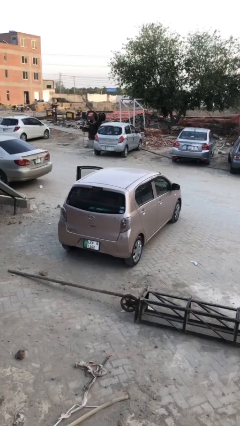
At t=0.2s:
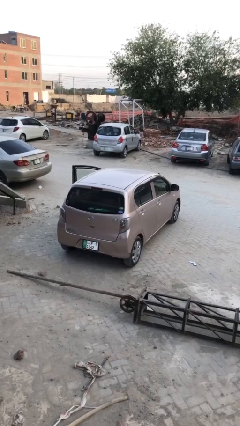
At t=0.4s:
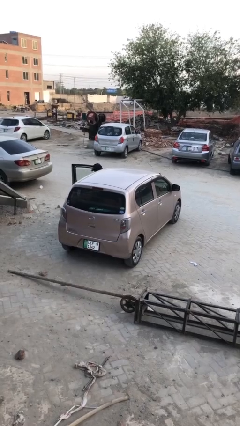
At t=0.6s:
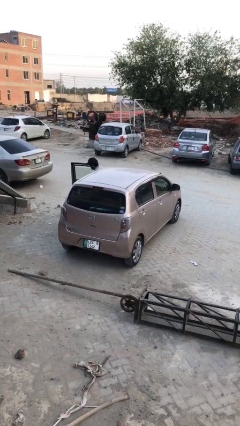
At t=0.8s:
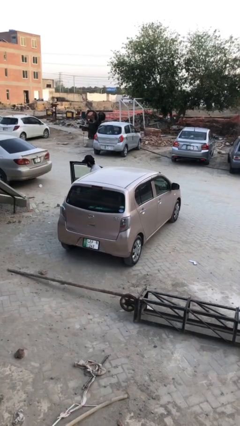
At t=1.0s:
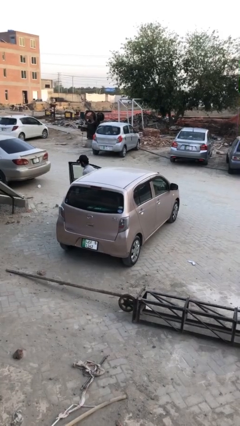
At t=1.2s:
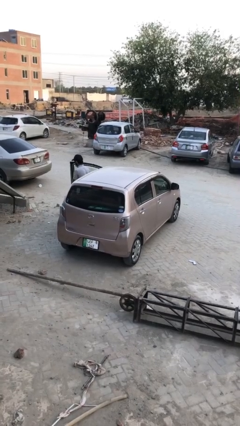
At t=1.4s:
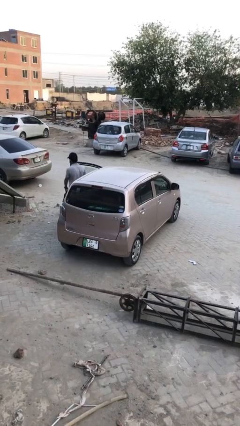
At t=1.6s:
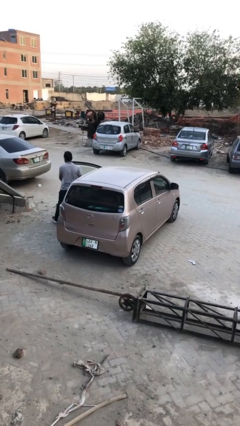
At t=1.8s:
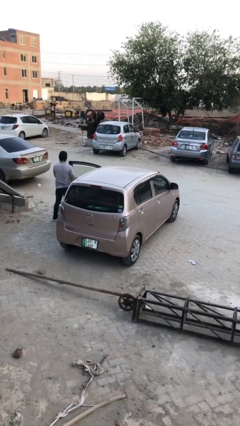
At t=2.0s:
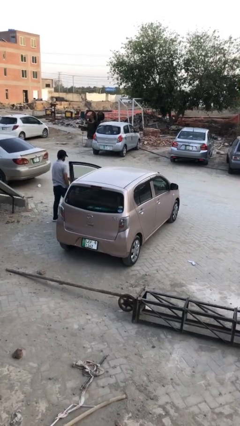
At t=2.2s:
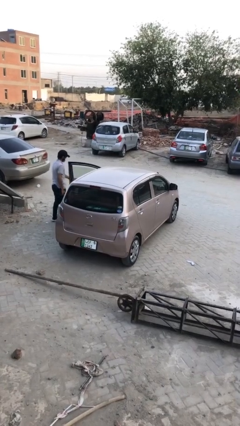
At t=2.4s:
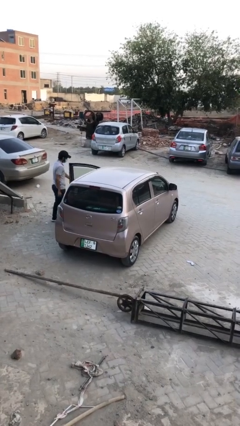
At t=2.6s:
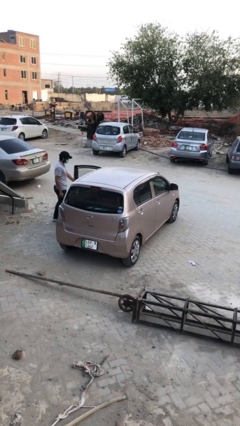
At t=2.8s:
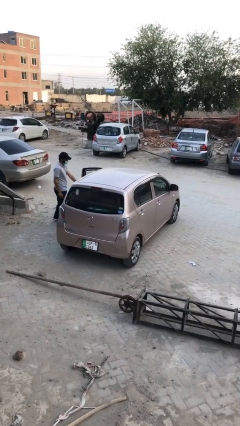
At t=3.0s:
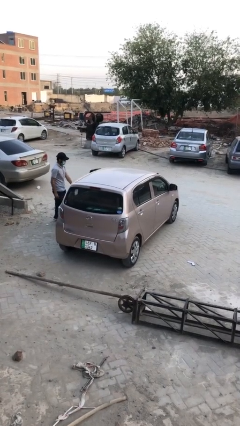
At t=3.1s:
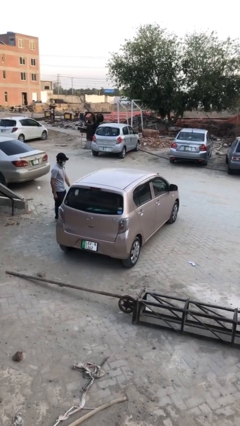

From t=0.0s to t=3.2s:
car drops off person

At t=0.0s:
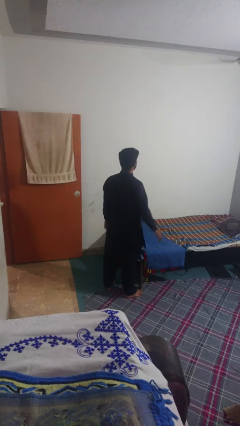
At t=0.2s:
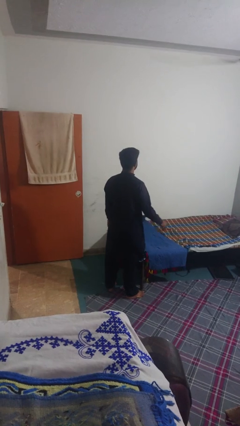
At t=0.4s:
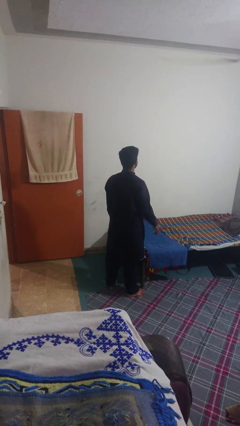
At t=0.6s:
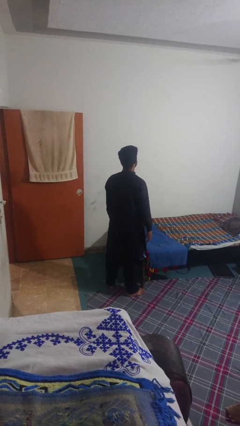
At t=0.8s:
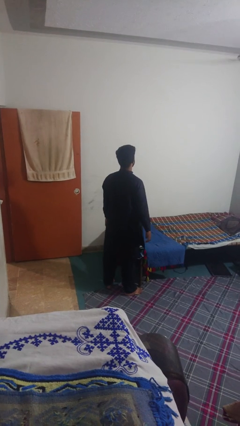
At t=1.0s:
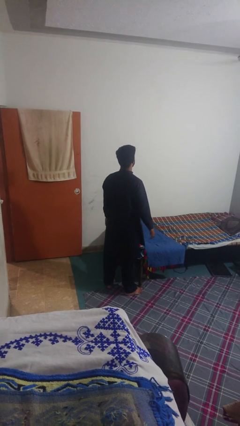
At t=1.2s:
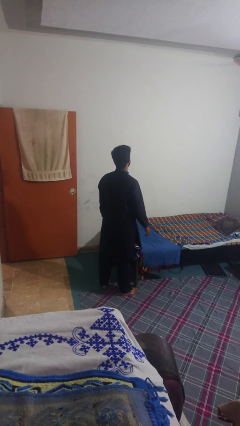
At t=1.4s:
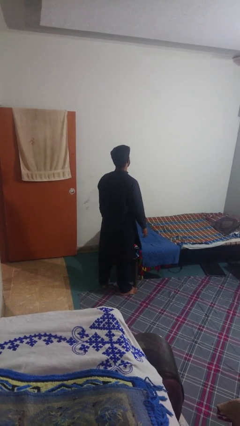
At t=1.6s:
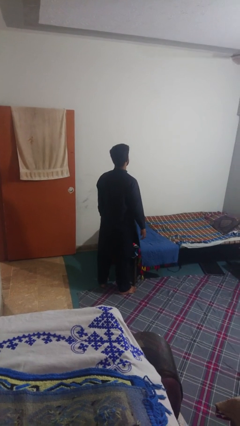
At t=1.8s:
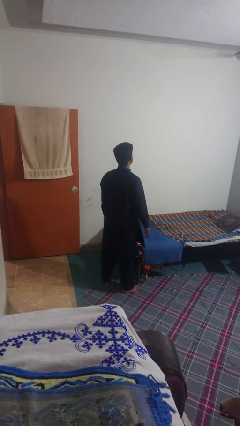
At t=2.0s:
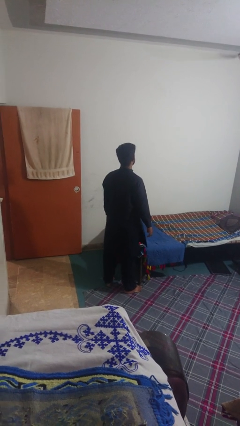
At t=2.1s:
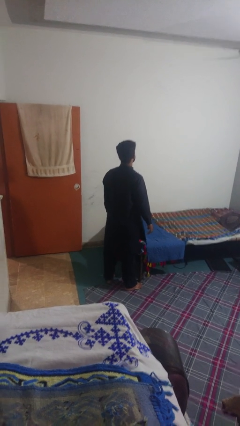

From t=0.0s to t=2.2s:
person gestures cut

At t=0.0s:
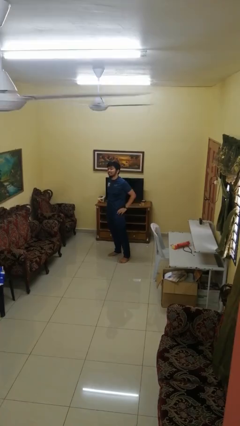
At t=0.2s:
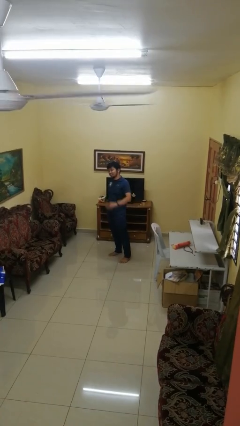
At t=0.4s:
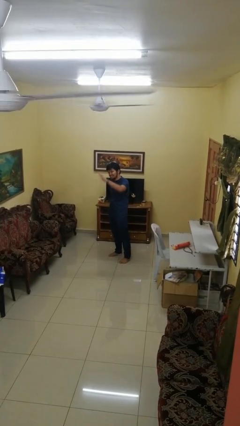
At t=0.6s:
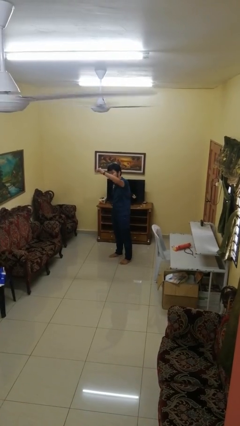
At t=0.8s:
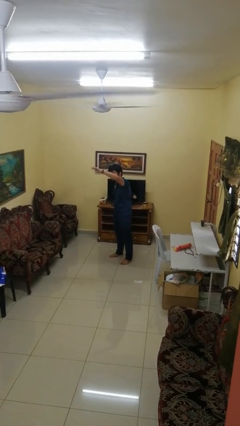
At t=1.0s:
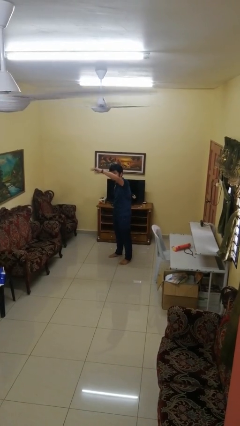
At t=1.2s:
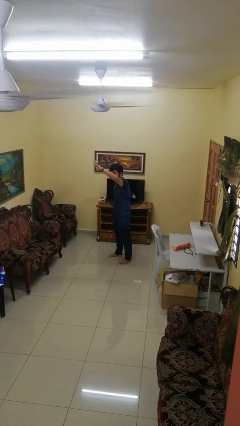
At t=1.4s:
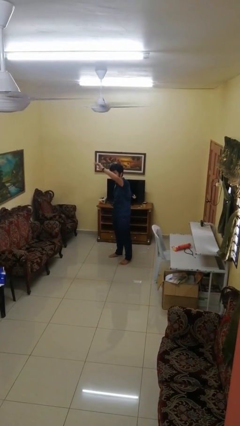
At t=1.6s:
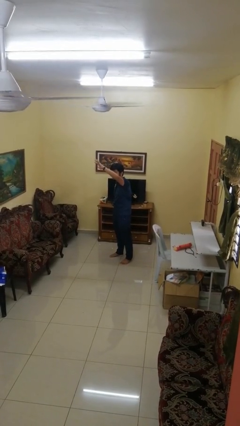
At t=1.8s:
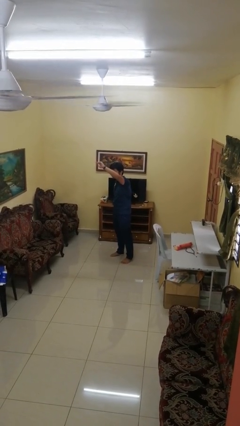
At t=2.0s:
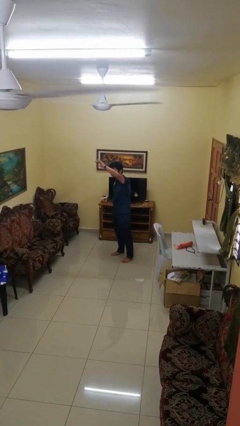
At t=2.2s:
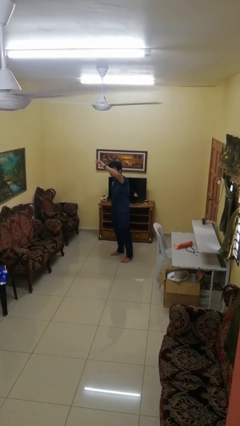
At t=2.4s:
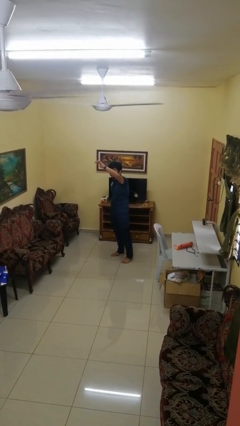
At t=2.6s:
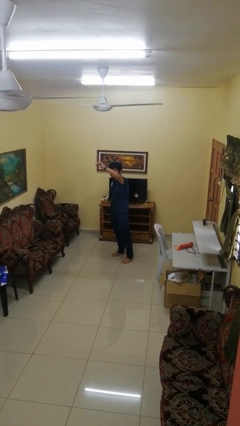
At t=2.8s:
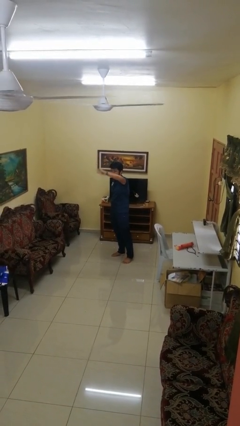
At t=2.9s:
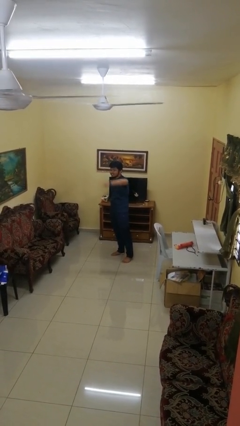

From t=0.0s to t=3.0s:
person gestures come here

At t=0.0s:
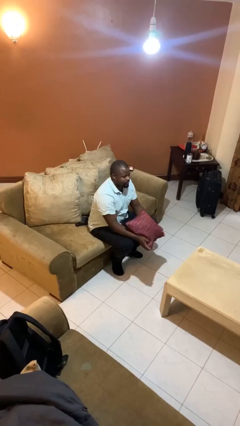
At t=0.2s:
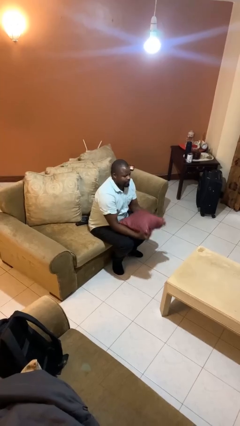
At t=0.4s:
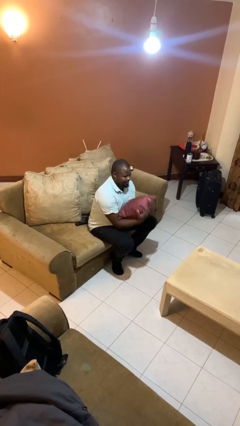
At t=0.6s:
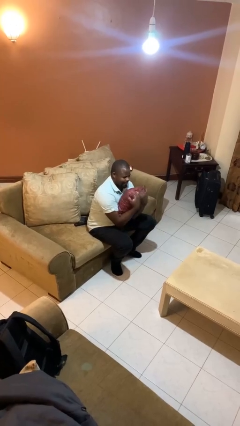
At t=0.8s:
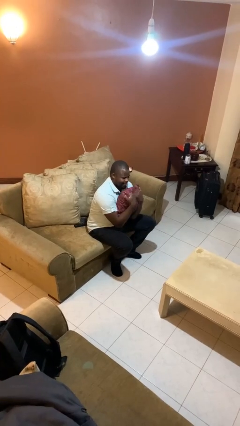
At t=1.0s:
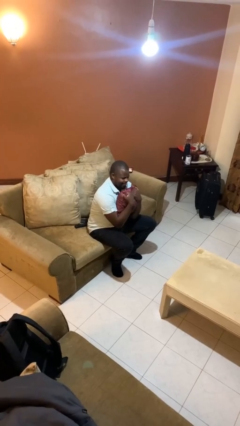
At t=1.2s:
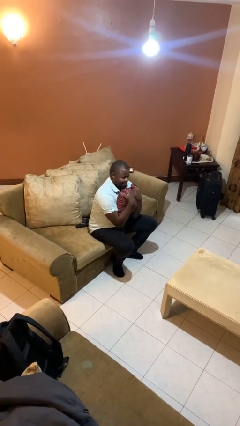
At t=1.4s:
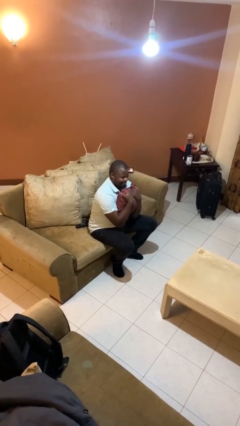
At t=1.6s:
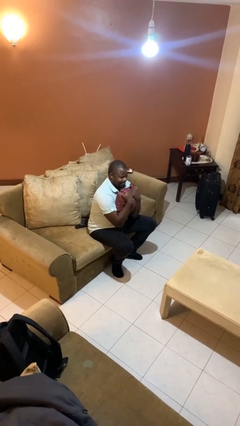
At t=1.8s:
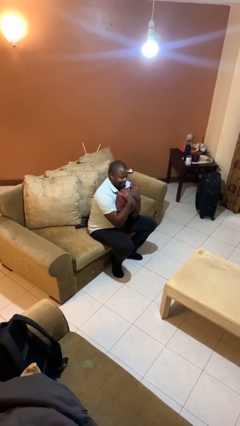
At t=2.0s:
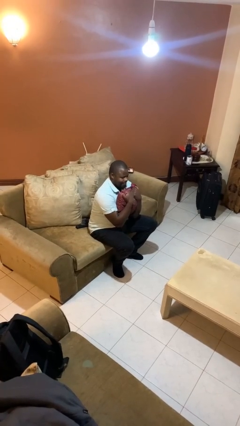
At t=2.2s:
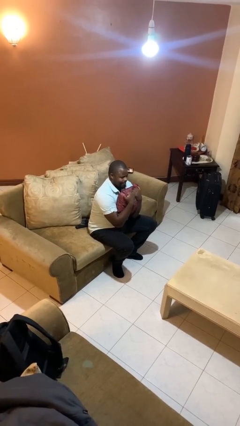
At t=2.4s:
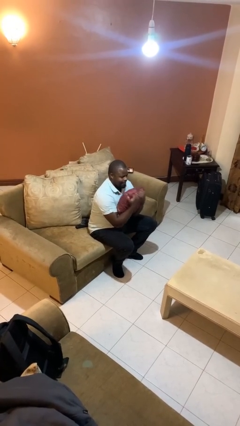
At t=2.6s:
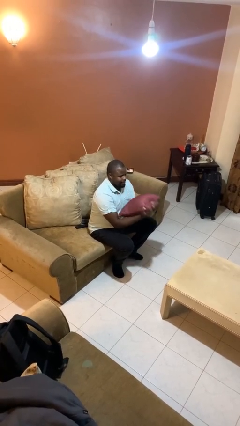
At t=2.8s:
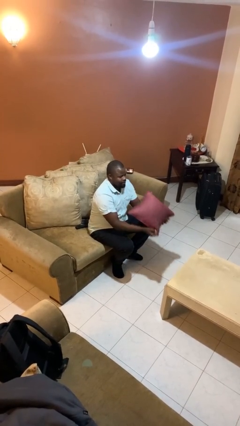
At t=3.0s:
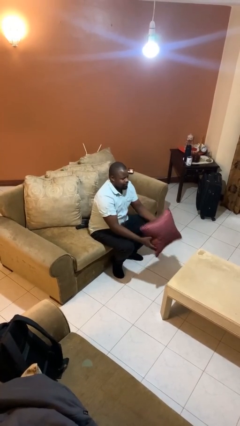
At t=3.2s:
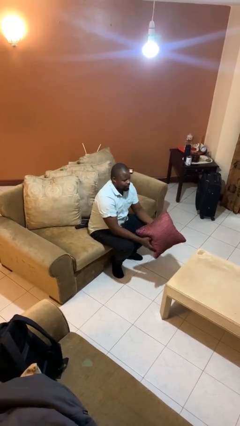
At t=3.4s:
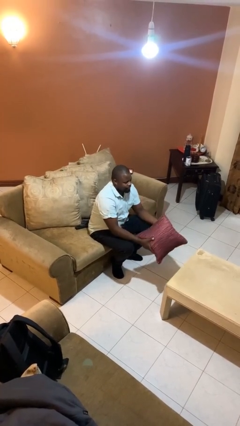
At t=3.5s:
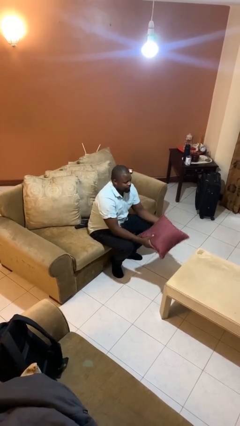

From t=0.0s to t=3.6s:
person squeezes object

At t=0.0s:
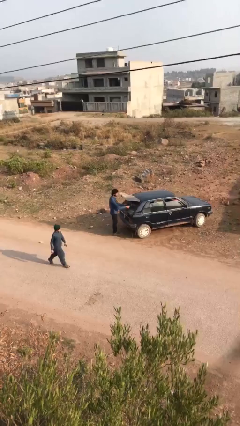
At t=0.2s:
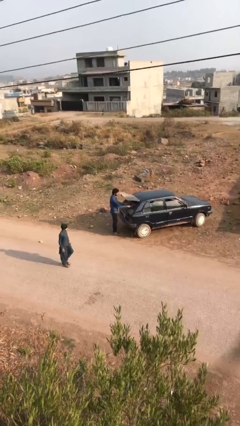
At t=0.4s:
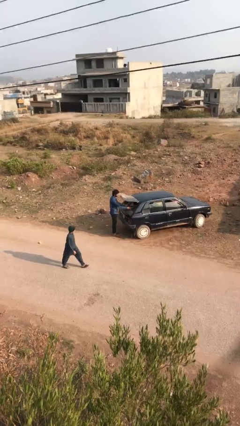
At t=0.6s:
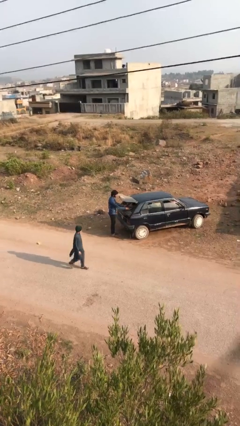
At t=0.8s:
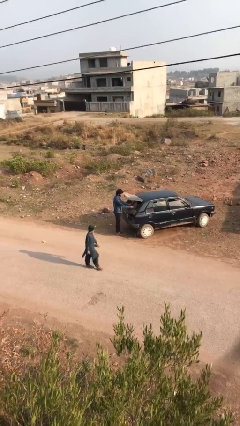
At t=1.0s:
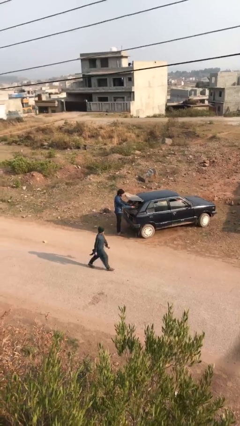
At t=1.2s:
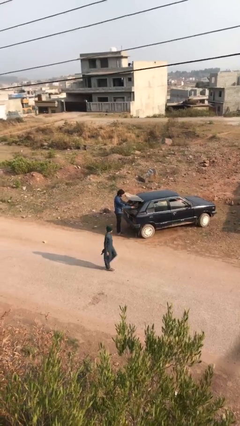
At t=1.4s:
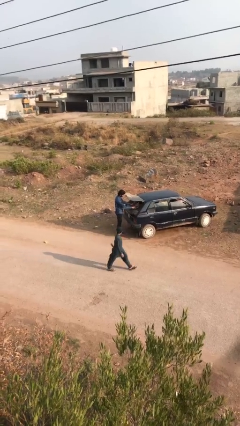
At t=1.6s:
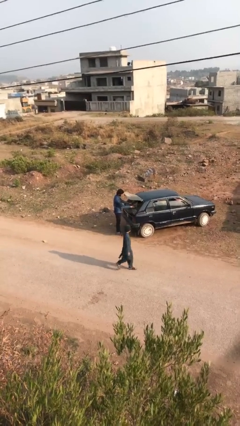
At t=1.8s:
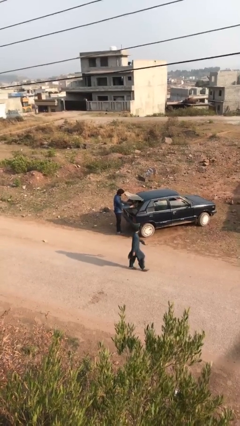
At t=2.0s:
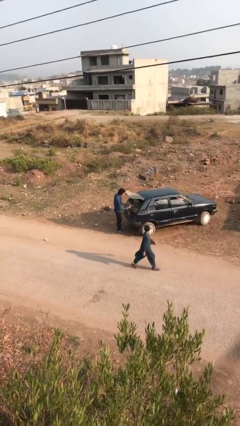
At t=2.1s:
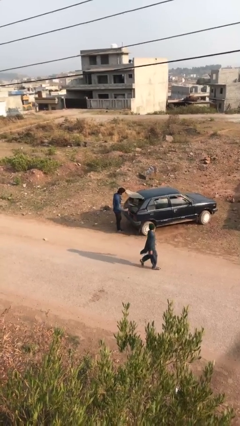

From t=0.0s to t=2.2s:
person loads car

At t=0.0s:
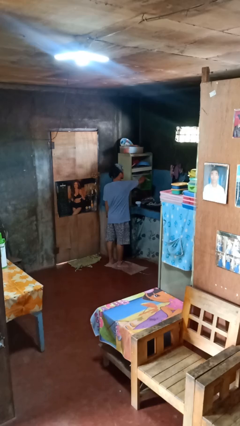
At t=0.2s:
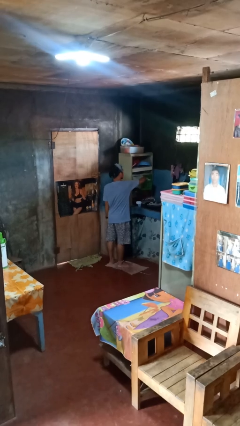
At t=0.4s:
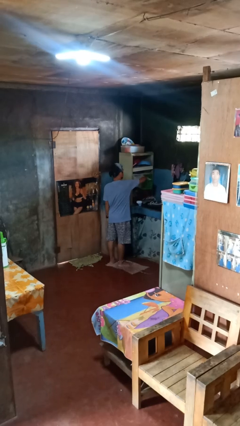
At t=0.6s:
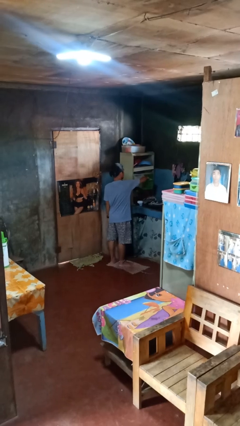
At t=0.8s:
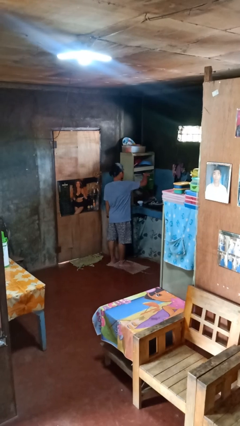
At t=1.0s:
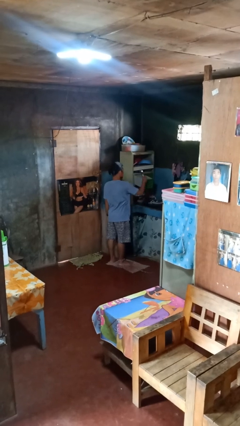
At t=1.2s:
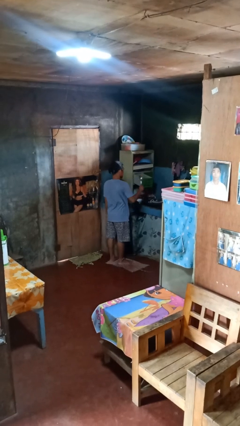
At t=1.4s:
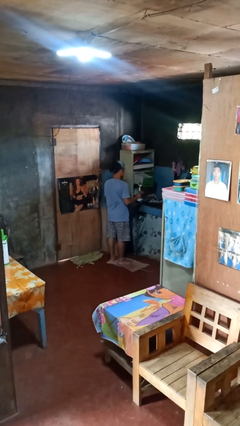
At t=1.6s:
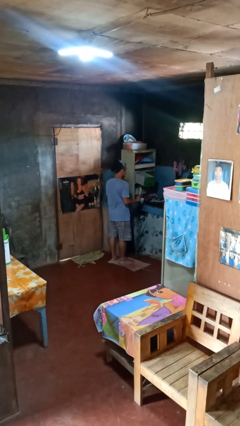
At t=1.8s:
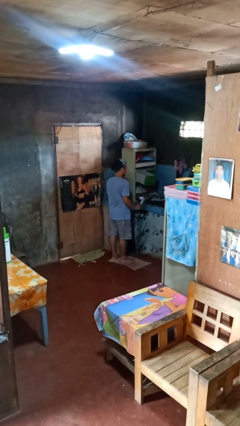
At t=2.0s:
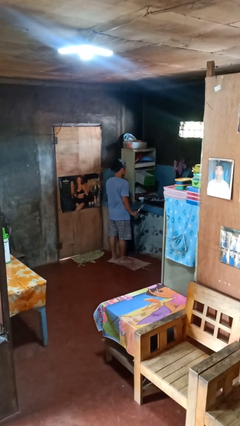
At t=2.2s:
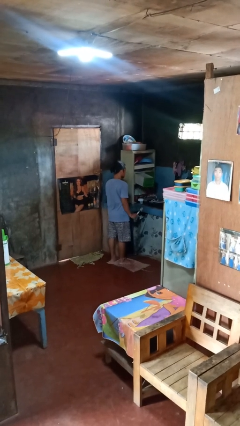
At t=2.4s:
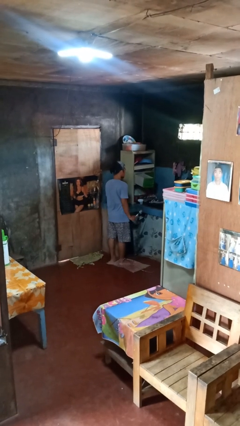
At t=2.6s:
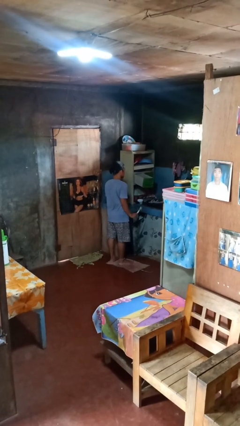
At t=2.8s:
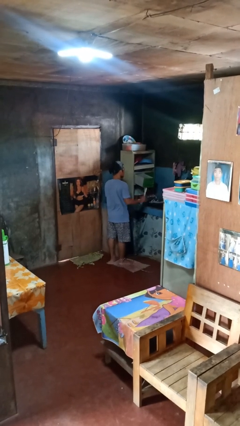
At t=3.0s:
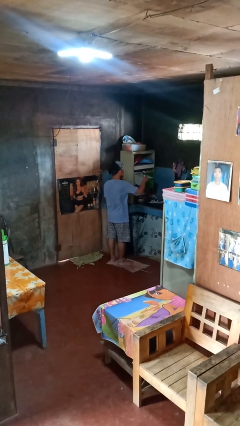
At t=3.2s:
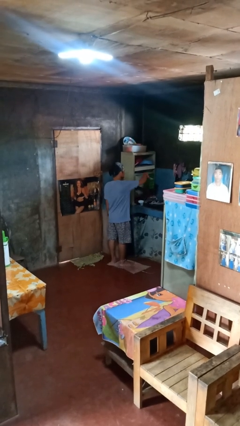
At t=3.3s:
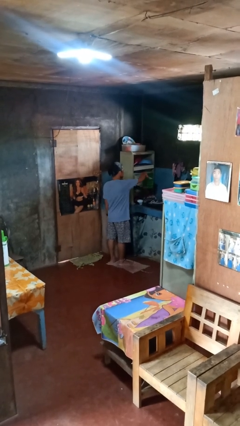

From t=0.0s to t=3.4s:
person takes object from kitchen drawer
